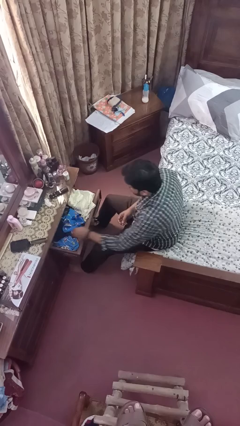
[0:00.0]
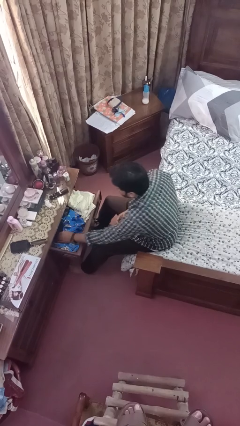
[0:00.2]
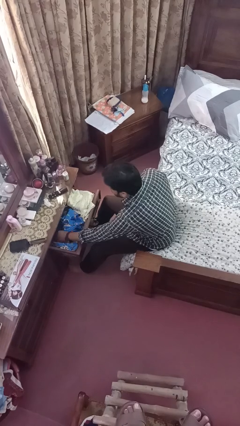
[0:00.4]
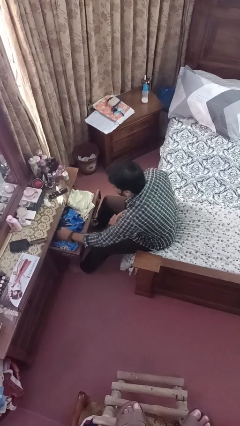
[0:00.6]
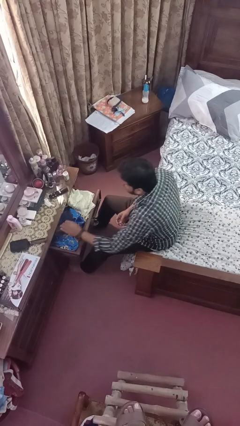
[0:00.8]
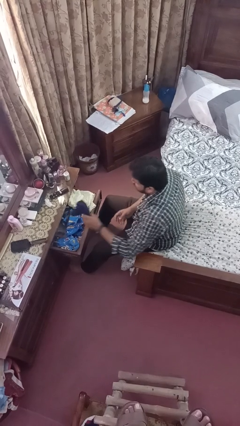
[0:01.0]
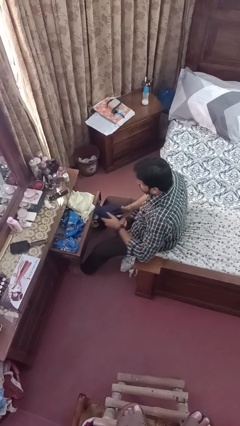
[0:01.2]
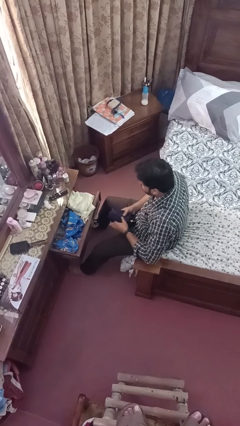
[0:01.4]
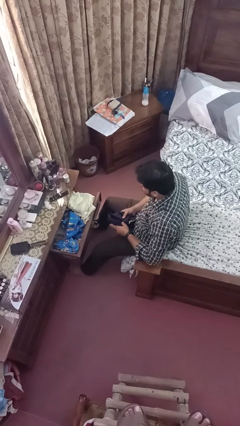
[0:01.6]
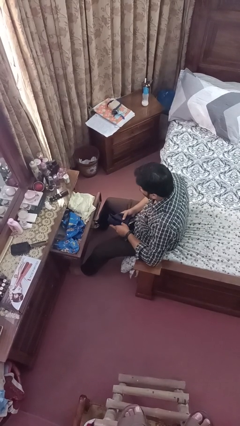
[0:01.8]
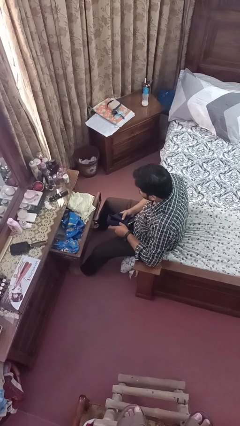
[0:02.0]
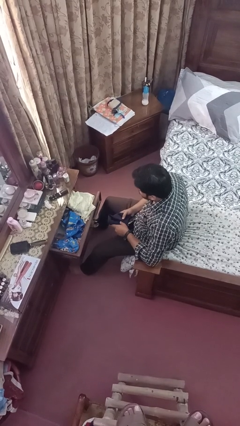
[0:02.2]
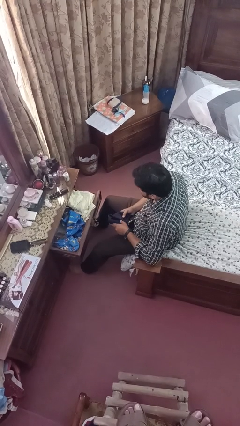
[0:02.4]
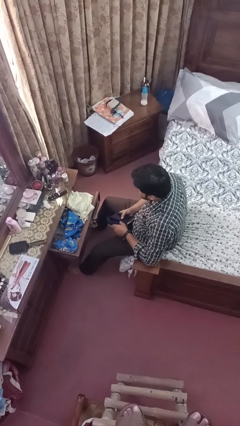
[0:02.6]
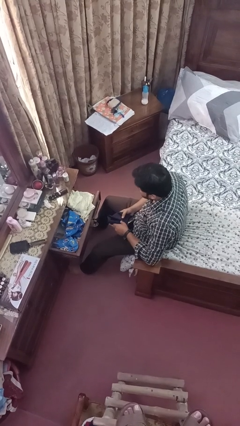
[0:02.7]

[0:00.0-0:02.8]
person takes clothes from dresser

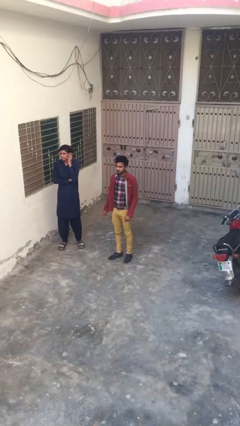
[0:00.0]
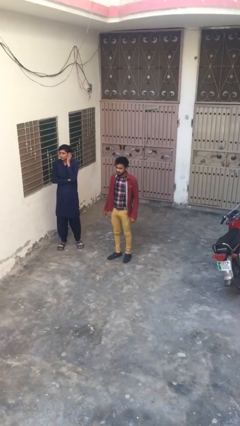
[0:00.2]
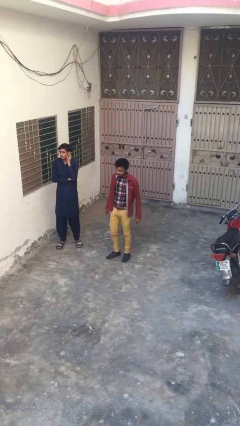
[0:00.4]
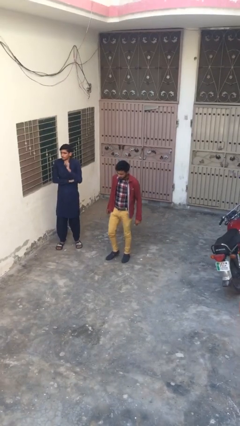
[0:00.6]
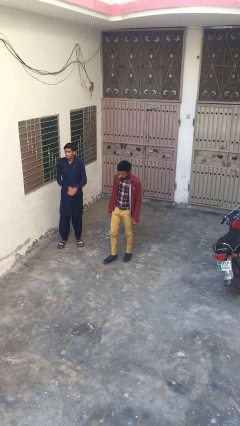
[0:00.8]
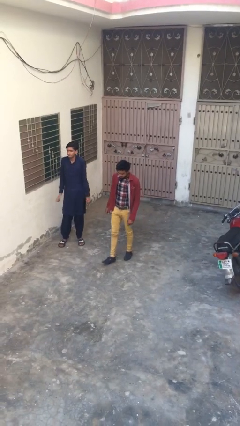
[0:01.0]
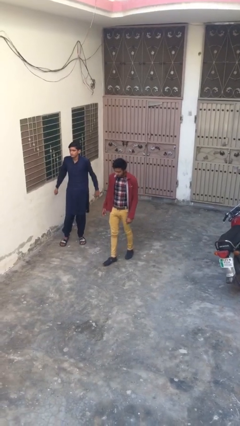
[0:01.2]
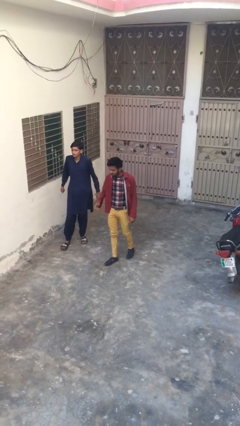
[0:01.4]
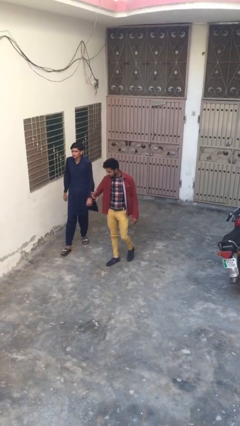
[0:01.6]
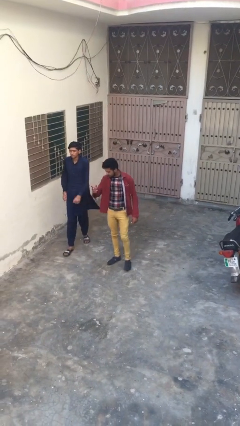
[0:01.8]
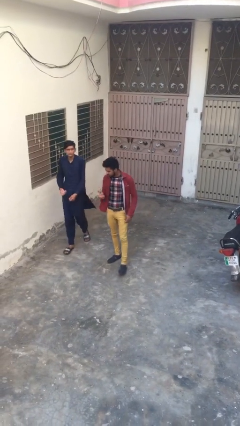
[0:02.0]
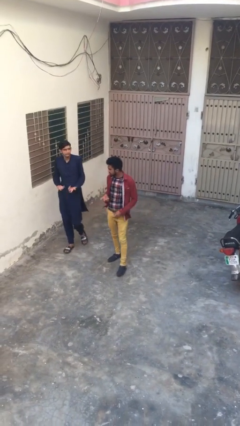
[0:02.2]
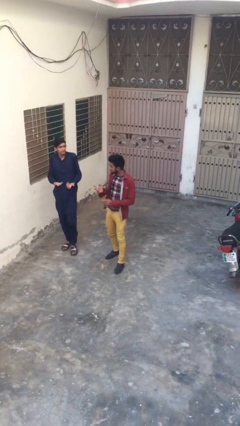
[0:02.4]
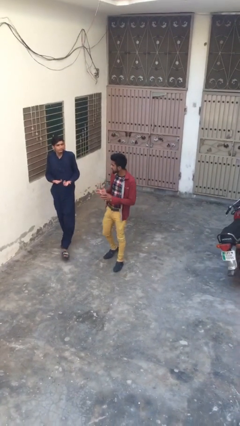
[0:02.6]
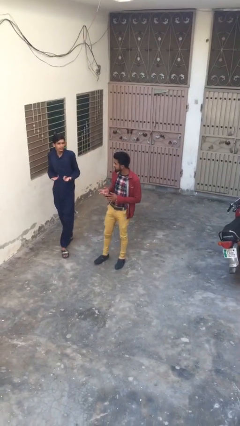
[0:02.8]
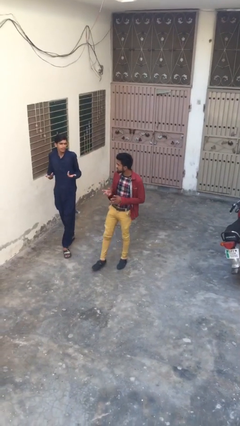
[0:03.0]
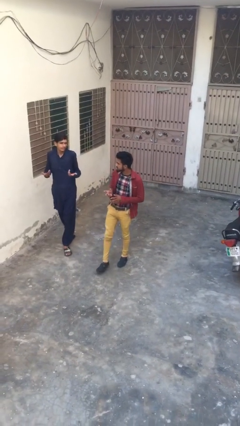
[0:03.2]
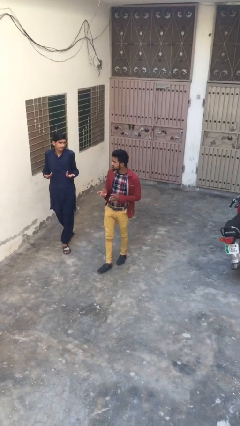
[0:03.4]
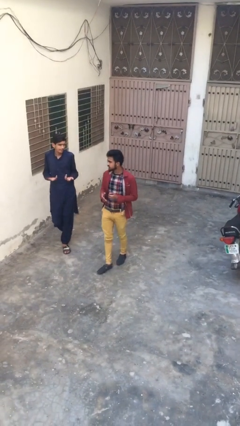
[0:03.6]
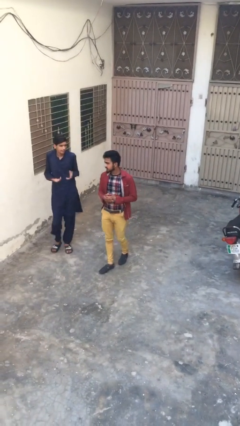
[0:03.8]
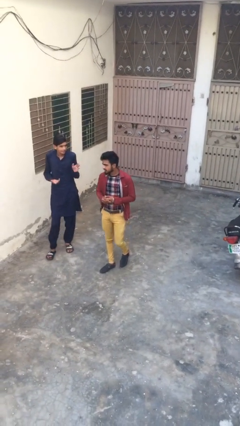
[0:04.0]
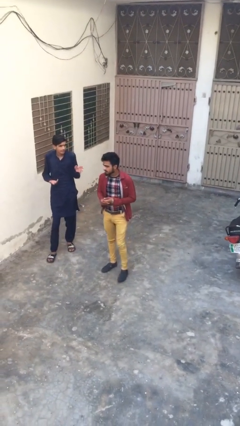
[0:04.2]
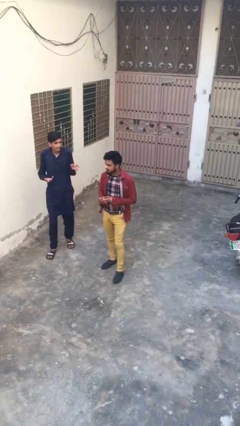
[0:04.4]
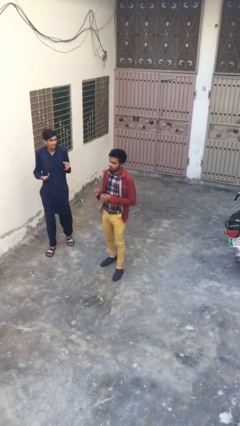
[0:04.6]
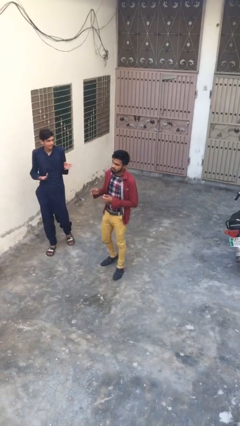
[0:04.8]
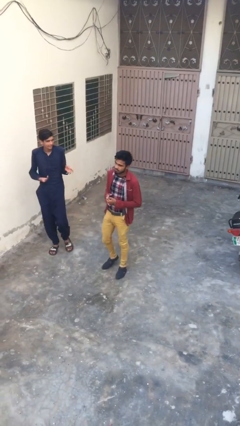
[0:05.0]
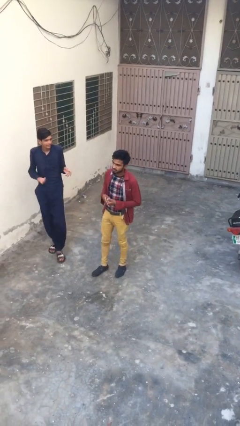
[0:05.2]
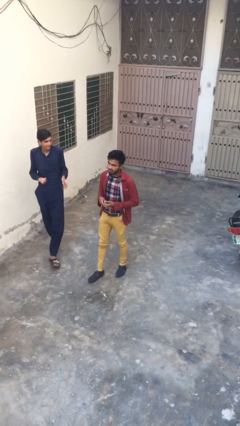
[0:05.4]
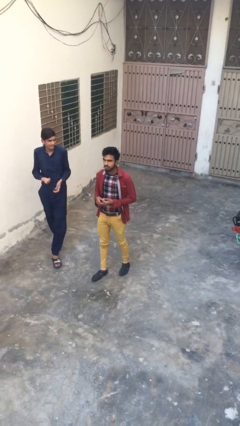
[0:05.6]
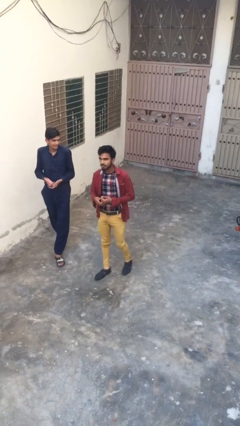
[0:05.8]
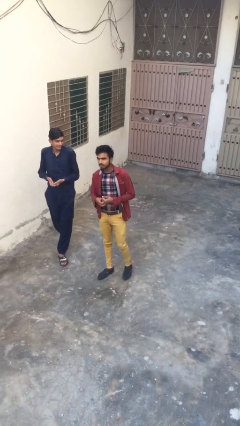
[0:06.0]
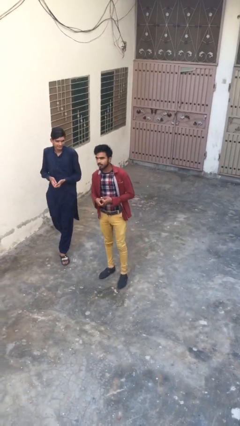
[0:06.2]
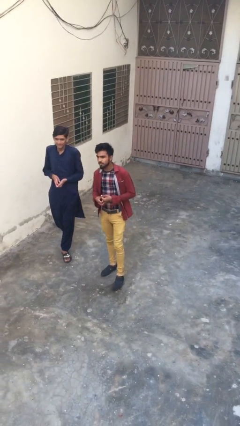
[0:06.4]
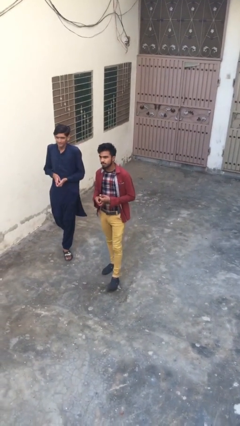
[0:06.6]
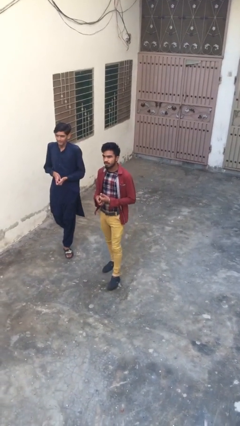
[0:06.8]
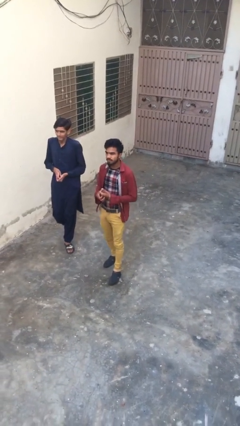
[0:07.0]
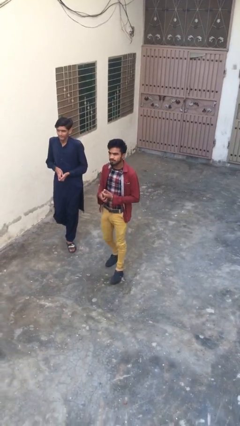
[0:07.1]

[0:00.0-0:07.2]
person talks to person

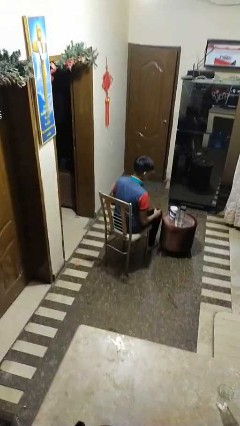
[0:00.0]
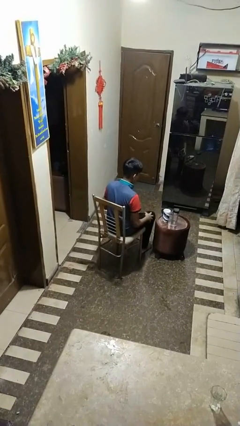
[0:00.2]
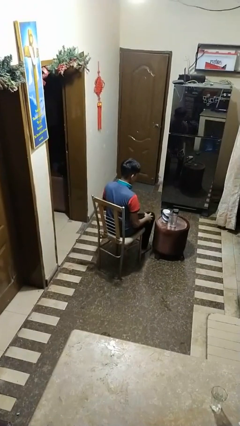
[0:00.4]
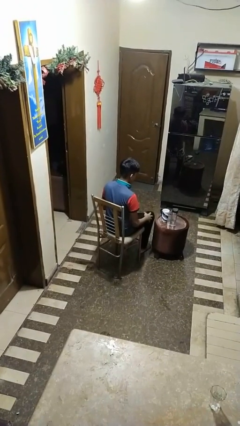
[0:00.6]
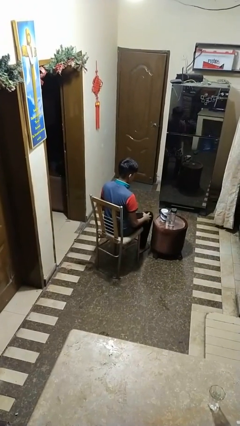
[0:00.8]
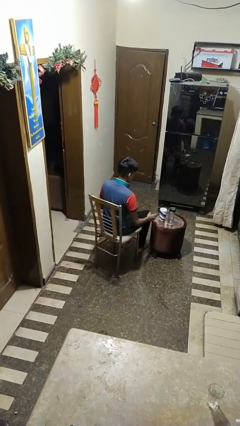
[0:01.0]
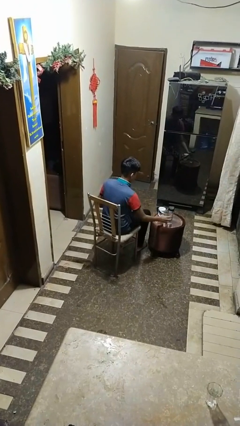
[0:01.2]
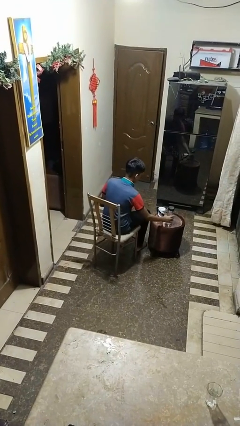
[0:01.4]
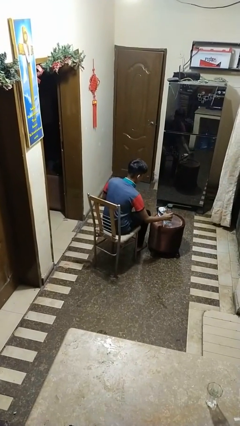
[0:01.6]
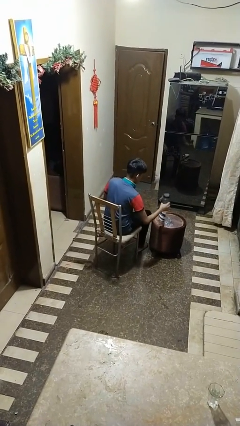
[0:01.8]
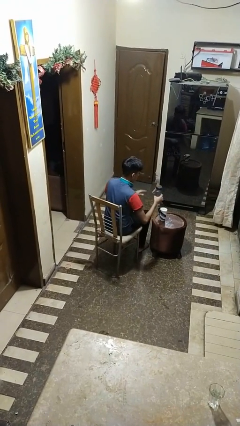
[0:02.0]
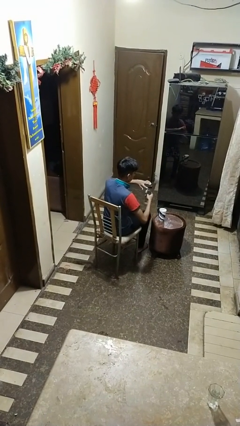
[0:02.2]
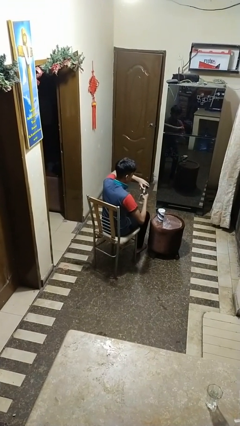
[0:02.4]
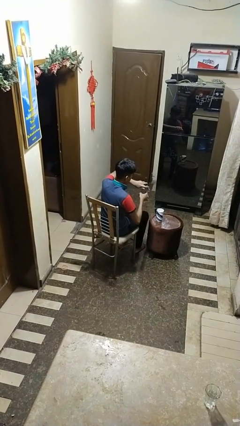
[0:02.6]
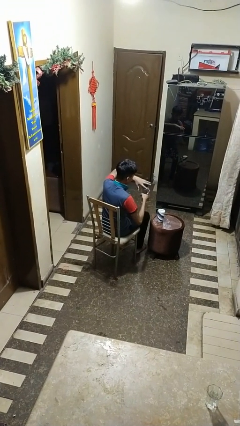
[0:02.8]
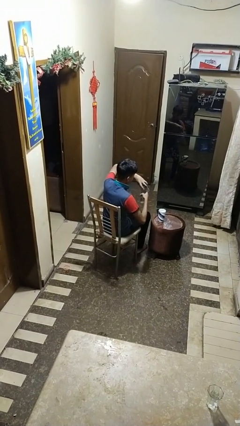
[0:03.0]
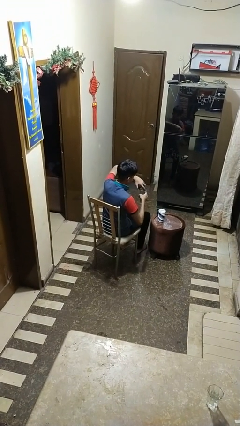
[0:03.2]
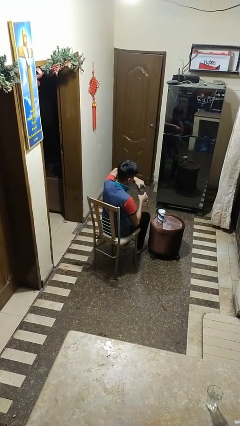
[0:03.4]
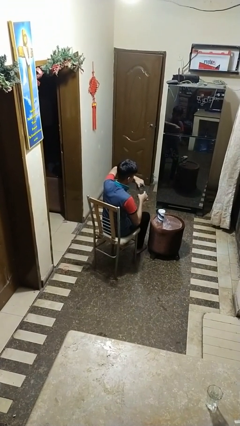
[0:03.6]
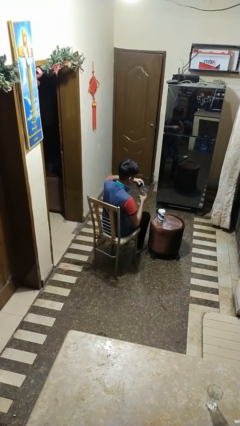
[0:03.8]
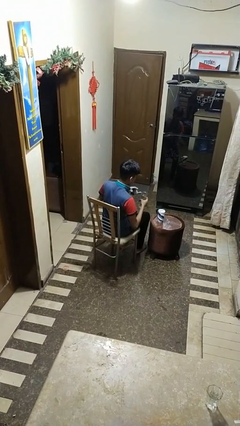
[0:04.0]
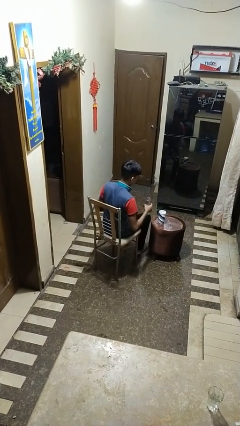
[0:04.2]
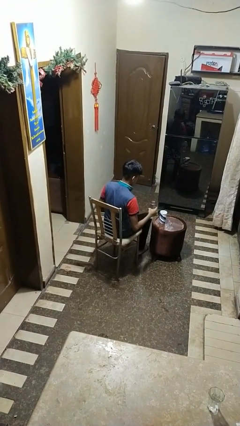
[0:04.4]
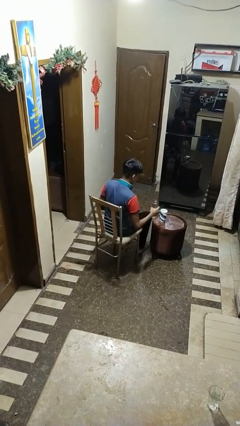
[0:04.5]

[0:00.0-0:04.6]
person unscrews lid from bottle

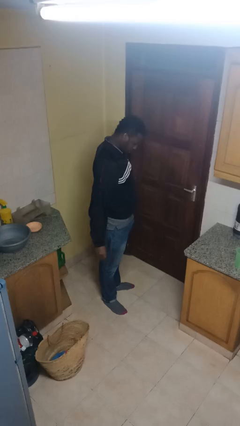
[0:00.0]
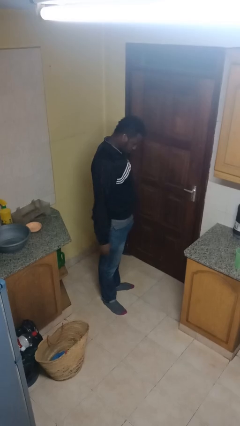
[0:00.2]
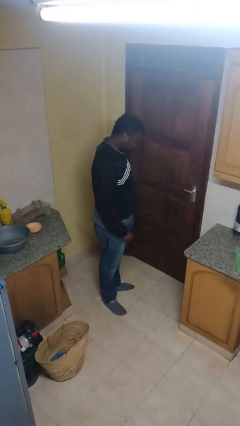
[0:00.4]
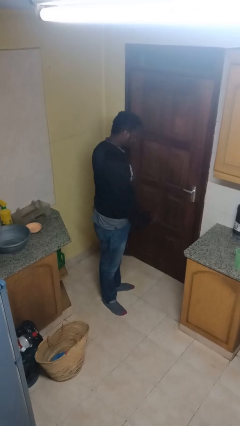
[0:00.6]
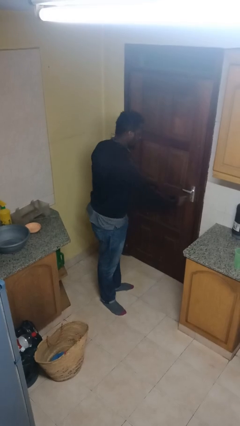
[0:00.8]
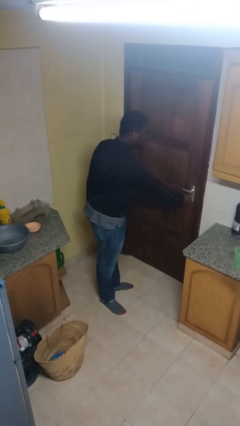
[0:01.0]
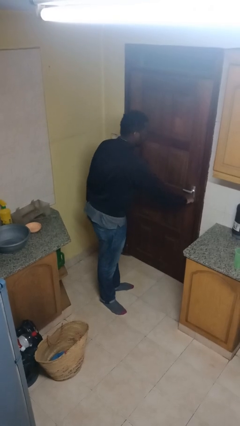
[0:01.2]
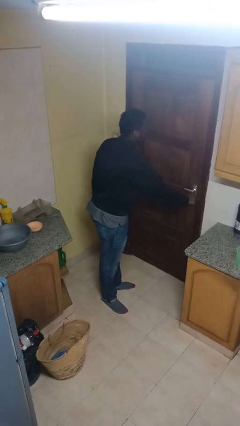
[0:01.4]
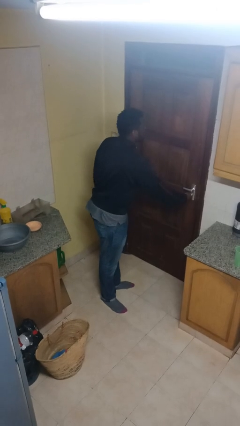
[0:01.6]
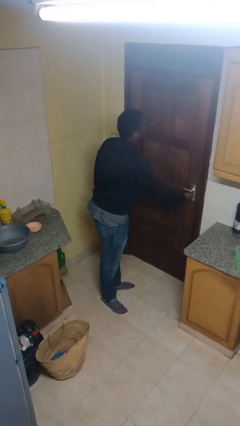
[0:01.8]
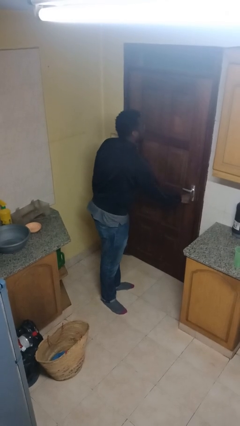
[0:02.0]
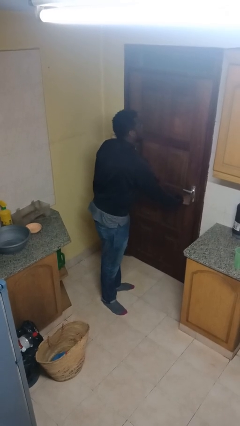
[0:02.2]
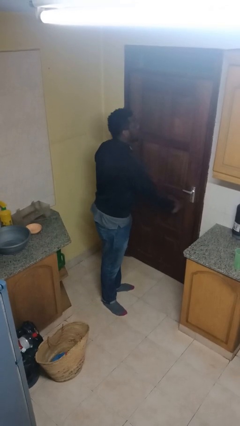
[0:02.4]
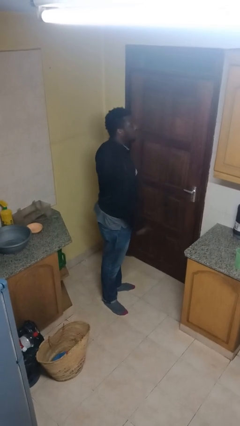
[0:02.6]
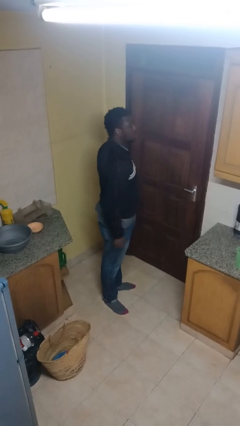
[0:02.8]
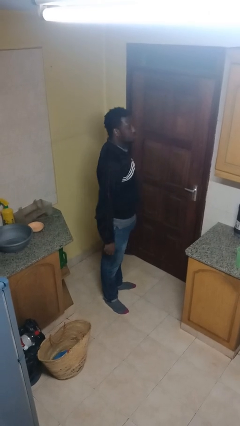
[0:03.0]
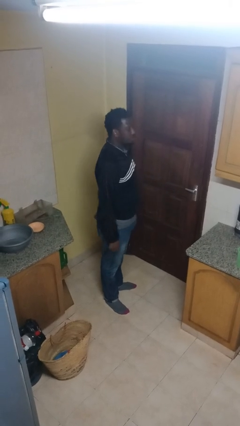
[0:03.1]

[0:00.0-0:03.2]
person unlocks door with keys
